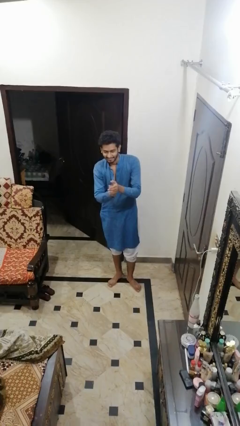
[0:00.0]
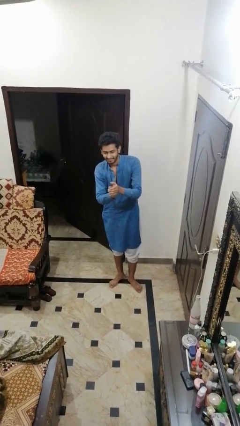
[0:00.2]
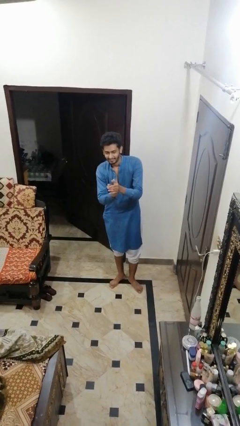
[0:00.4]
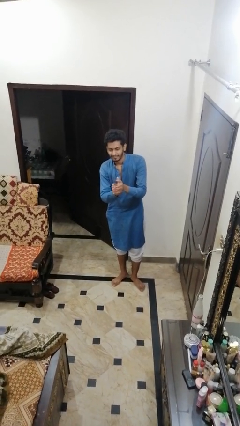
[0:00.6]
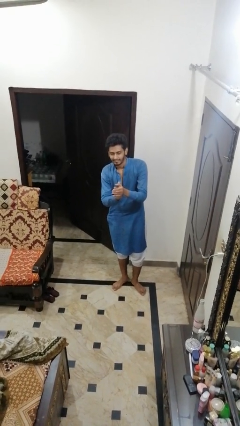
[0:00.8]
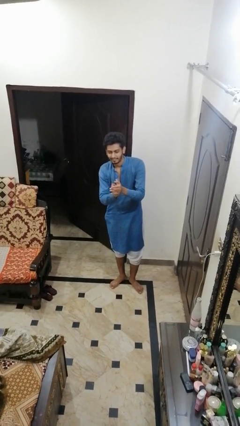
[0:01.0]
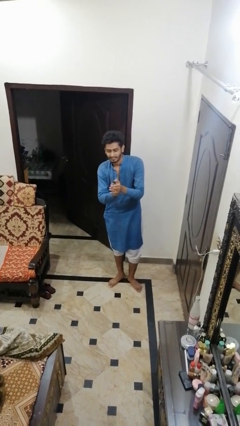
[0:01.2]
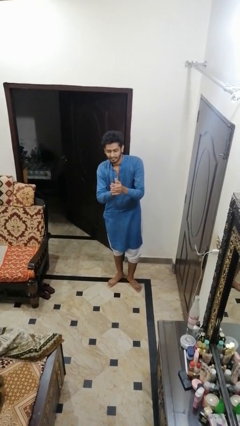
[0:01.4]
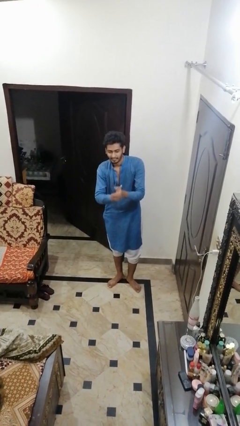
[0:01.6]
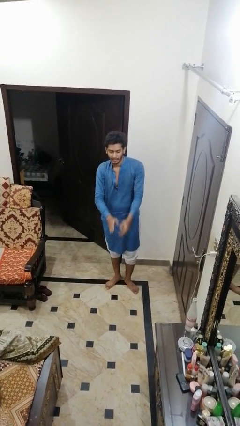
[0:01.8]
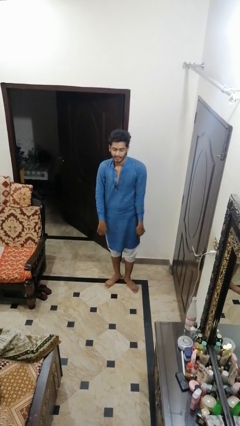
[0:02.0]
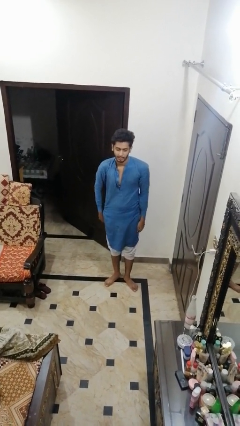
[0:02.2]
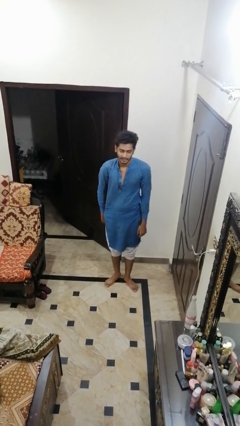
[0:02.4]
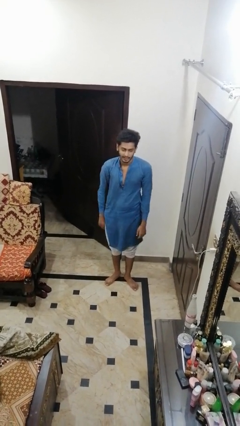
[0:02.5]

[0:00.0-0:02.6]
person claps hands

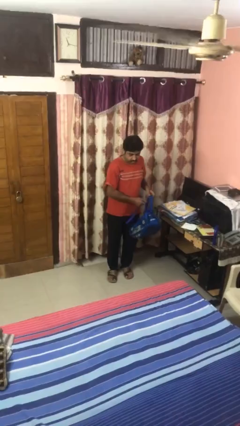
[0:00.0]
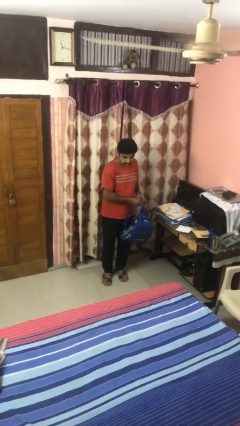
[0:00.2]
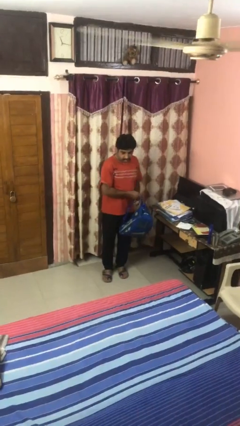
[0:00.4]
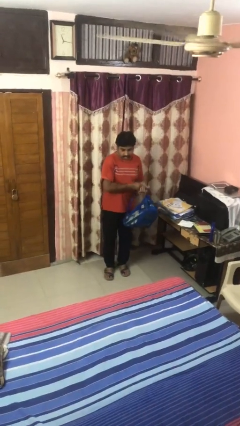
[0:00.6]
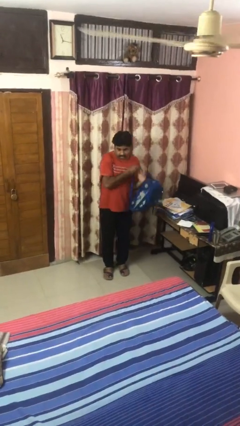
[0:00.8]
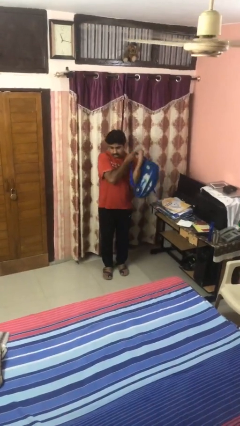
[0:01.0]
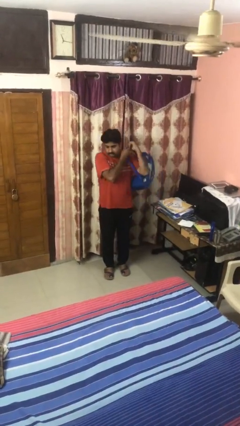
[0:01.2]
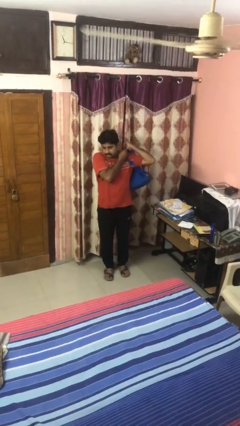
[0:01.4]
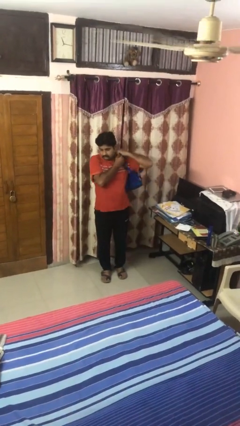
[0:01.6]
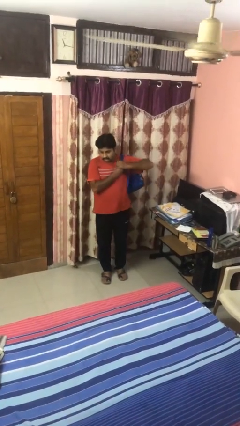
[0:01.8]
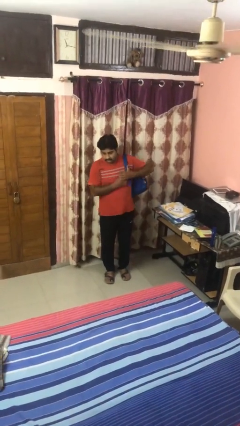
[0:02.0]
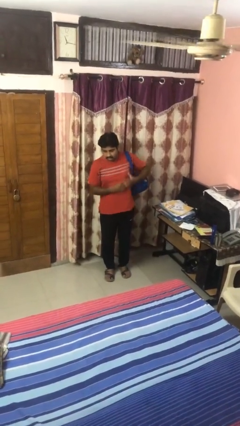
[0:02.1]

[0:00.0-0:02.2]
person puts on backpack

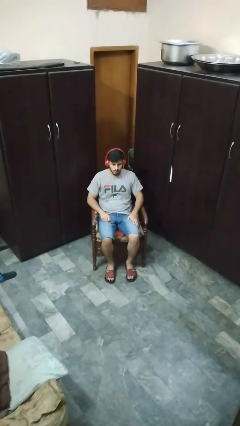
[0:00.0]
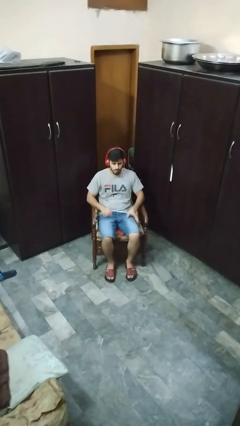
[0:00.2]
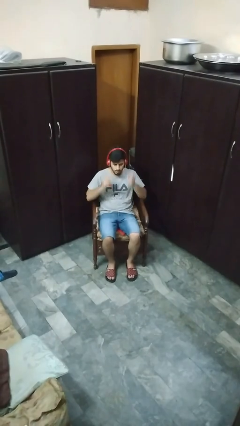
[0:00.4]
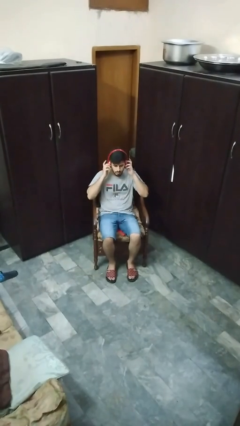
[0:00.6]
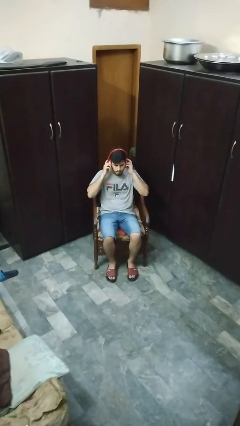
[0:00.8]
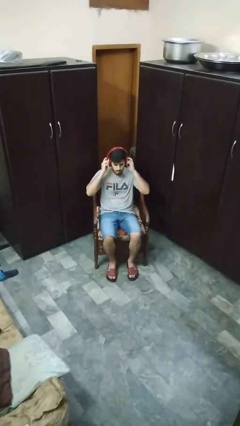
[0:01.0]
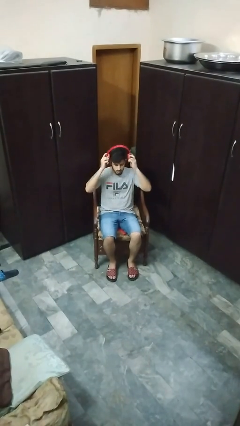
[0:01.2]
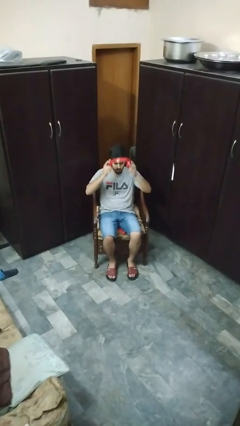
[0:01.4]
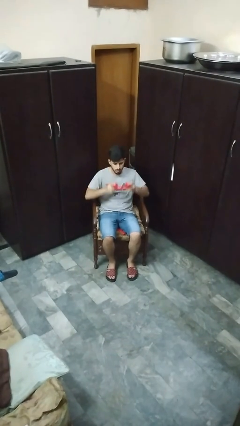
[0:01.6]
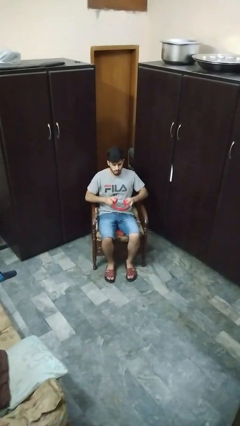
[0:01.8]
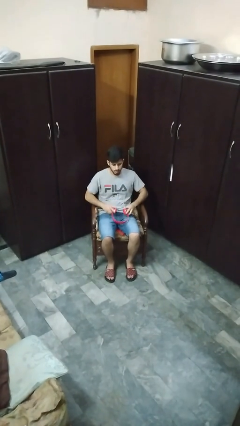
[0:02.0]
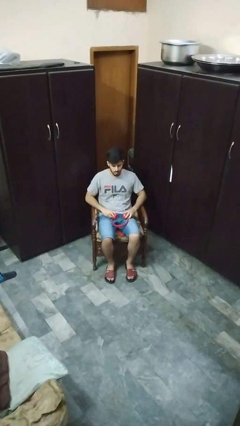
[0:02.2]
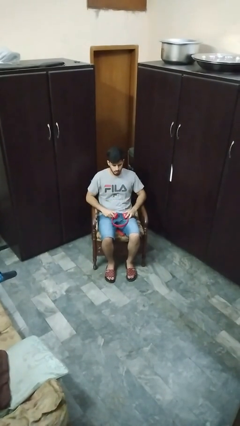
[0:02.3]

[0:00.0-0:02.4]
person takes off headphones

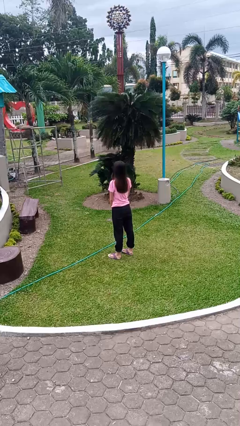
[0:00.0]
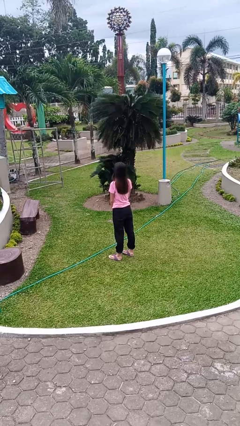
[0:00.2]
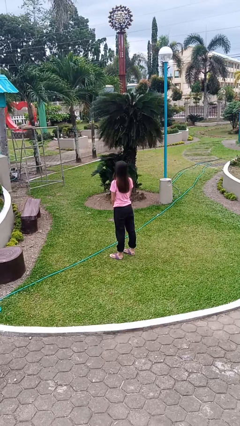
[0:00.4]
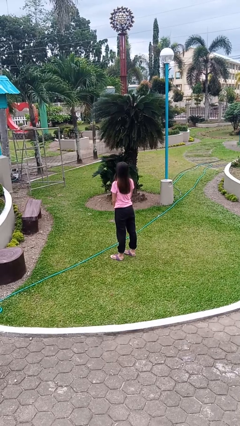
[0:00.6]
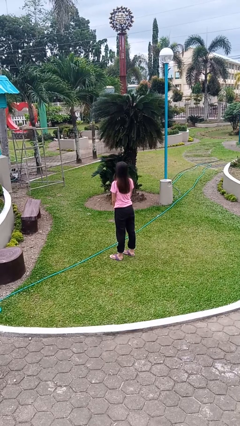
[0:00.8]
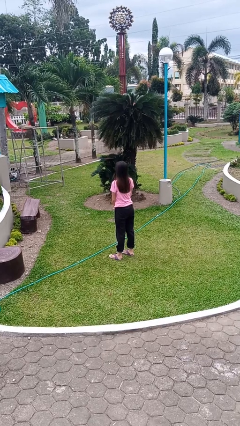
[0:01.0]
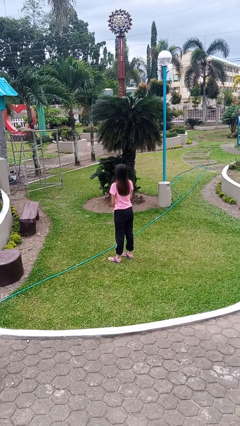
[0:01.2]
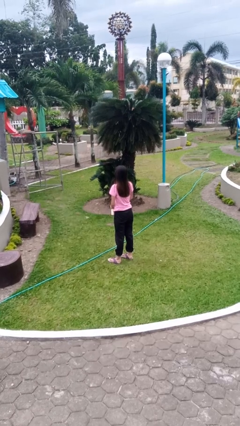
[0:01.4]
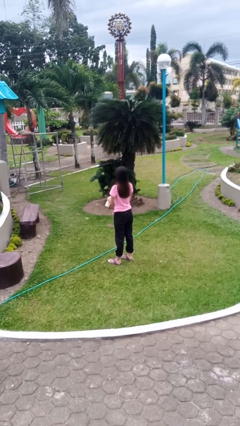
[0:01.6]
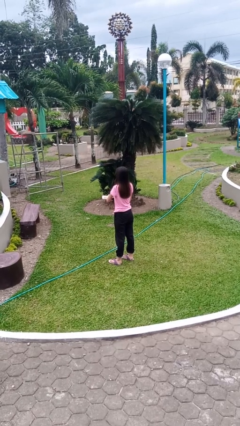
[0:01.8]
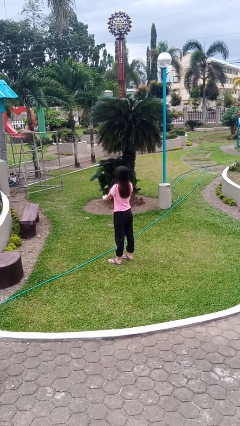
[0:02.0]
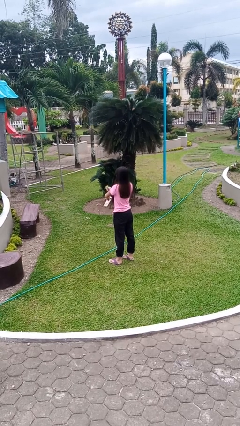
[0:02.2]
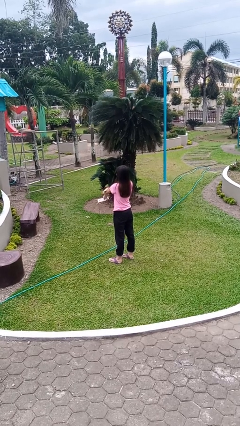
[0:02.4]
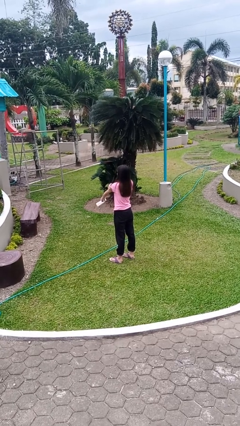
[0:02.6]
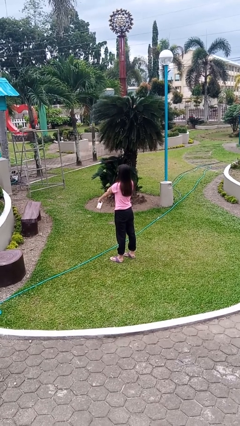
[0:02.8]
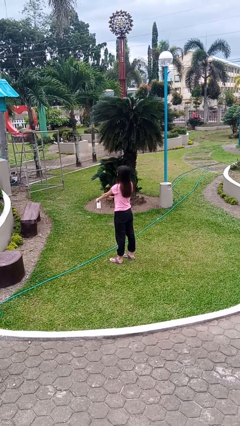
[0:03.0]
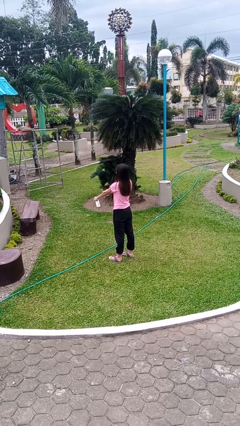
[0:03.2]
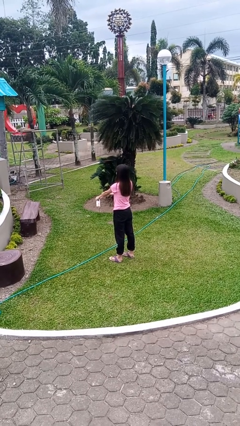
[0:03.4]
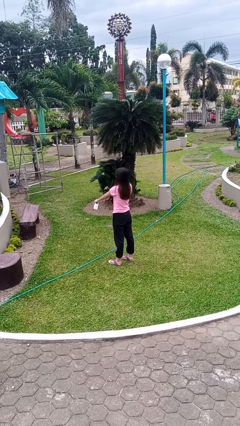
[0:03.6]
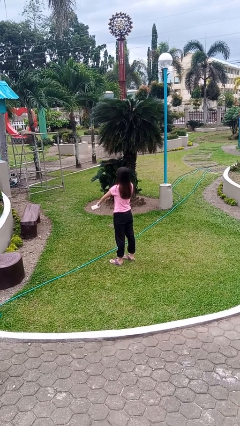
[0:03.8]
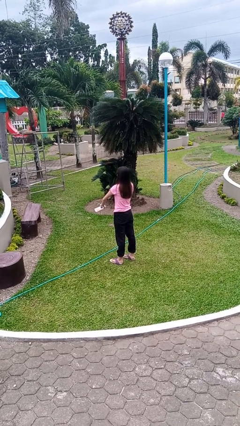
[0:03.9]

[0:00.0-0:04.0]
person applies sunscreen

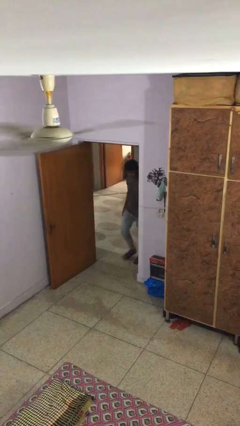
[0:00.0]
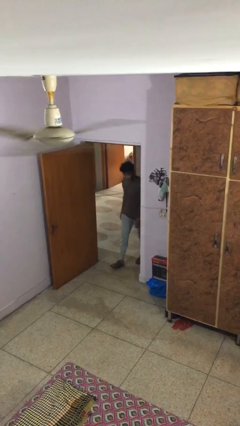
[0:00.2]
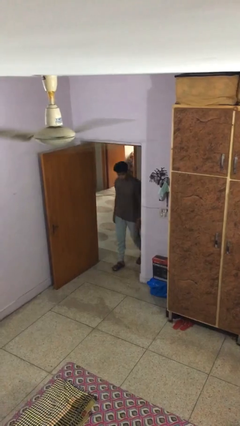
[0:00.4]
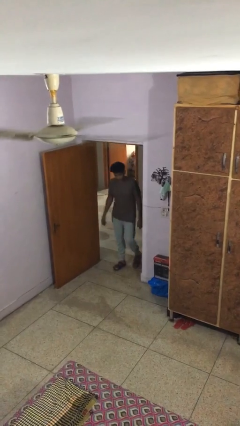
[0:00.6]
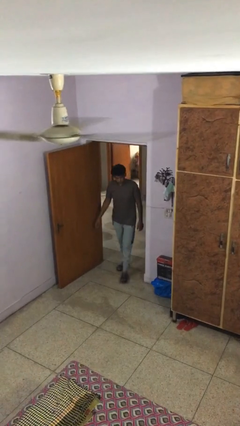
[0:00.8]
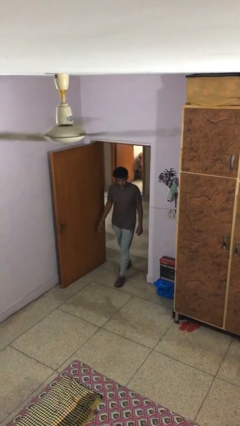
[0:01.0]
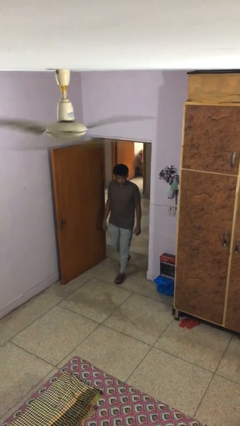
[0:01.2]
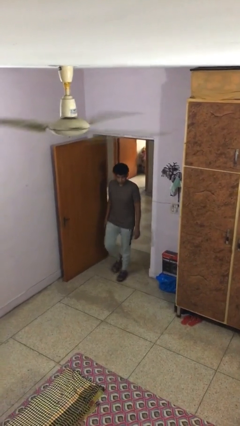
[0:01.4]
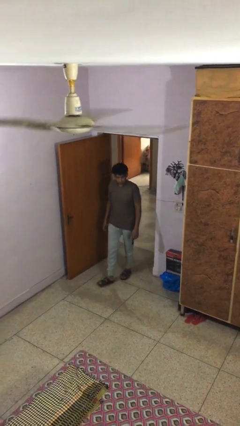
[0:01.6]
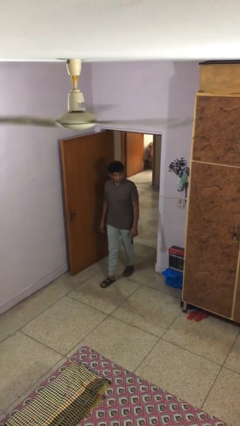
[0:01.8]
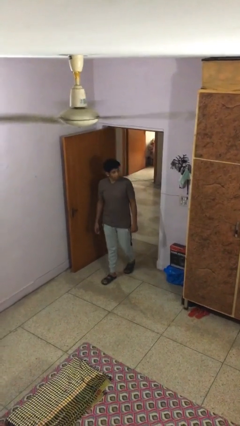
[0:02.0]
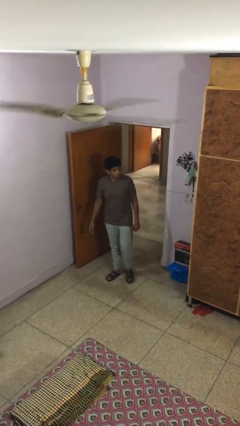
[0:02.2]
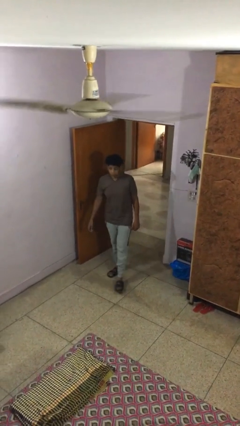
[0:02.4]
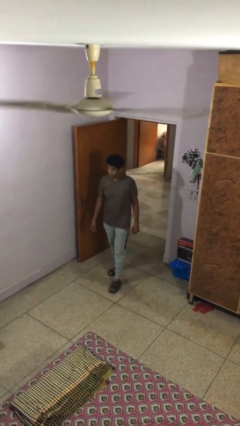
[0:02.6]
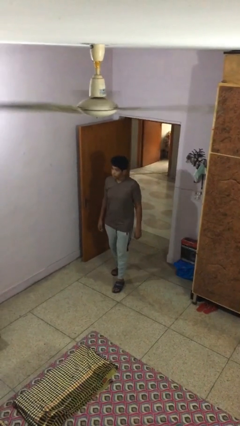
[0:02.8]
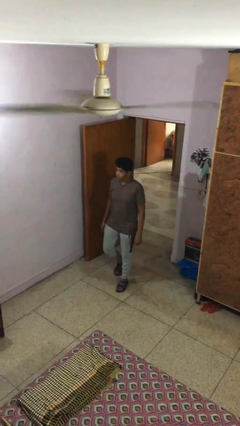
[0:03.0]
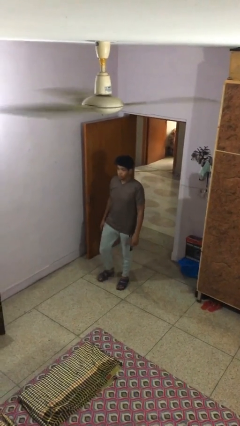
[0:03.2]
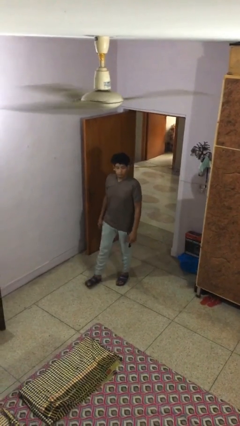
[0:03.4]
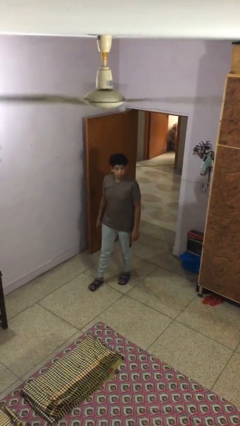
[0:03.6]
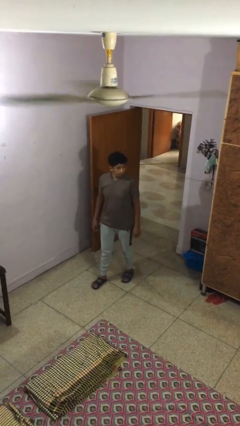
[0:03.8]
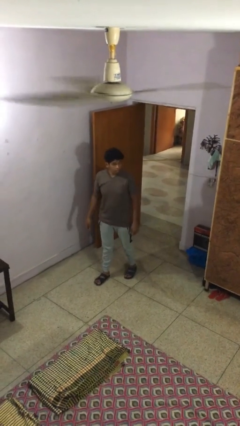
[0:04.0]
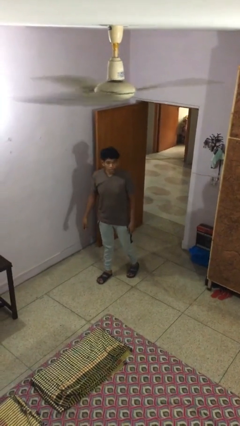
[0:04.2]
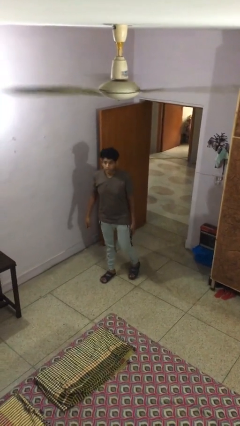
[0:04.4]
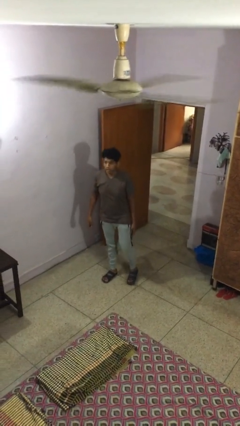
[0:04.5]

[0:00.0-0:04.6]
person enters scene through structure

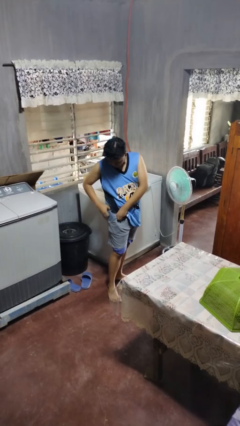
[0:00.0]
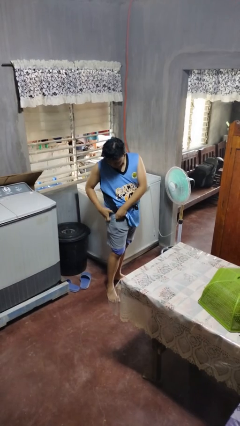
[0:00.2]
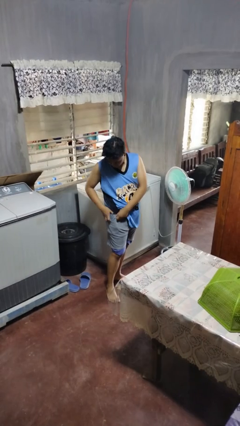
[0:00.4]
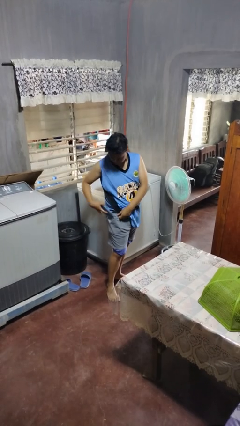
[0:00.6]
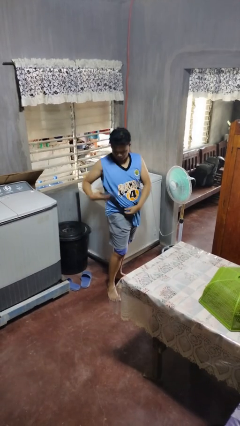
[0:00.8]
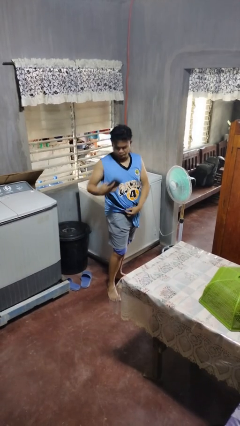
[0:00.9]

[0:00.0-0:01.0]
person takes phone from pocket

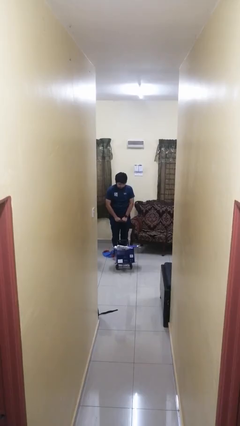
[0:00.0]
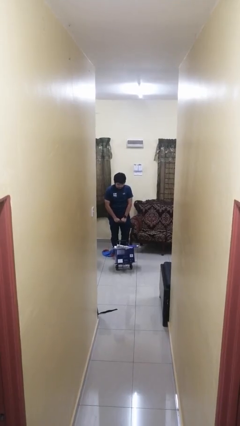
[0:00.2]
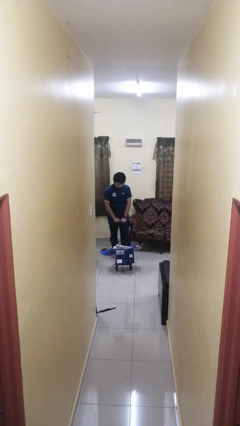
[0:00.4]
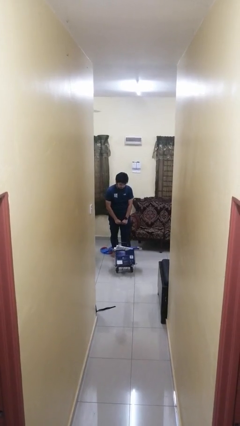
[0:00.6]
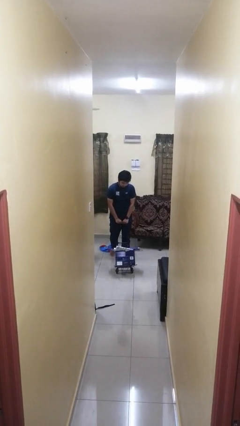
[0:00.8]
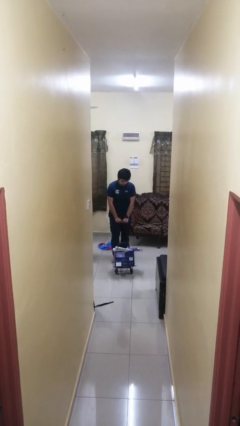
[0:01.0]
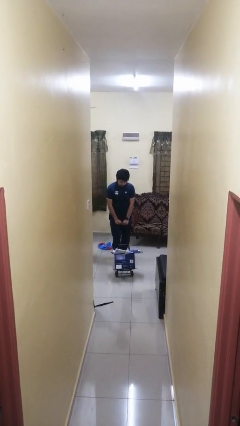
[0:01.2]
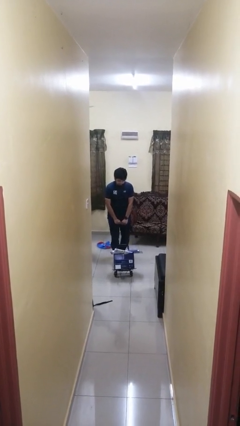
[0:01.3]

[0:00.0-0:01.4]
person pushes wheeled cart
